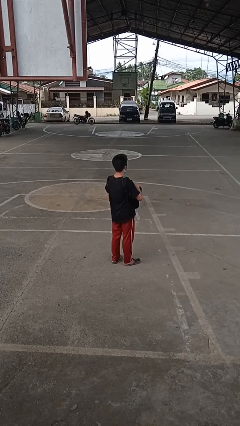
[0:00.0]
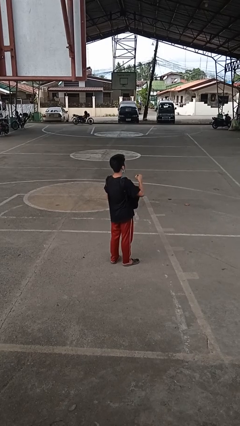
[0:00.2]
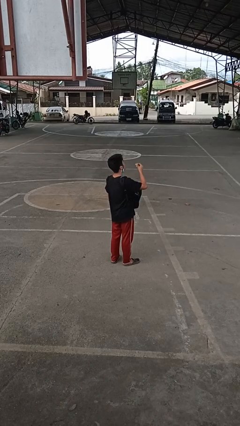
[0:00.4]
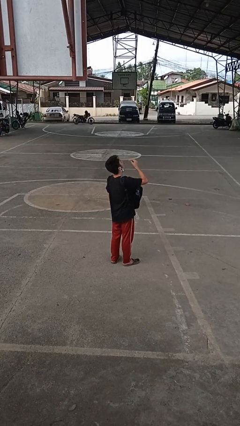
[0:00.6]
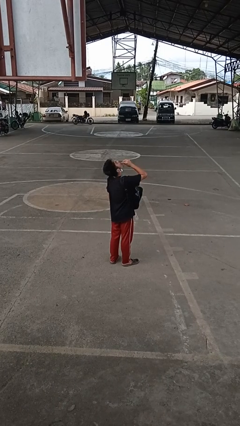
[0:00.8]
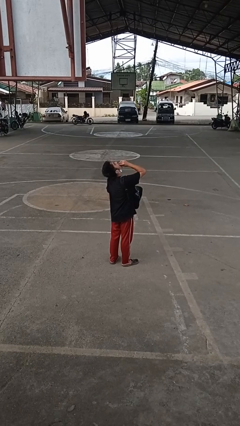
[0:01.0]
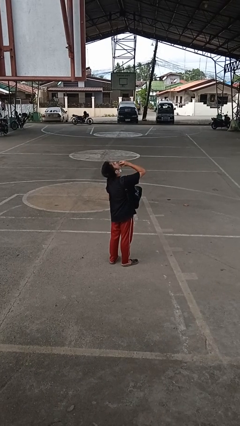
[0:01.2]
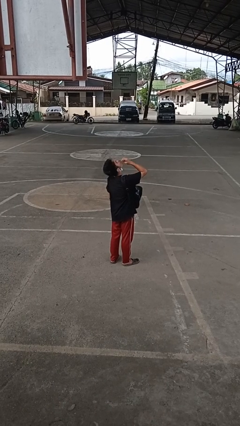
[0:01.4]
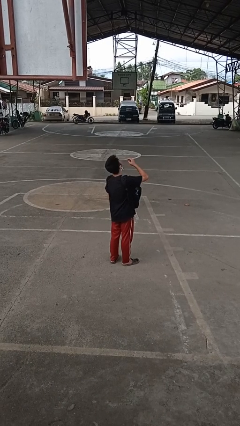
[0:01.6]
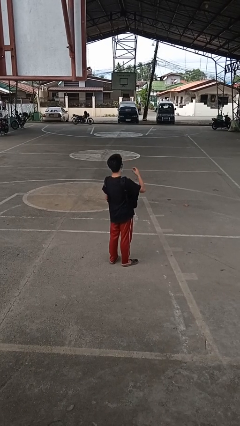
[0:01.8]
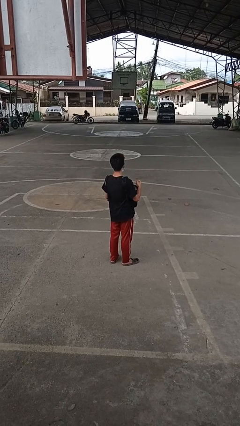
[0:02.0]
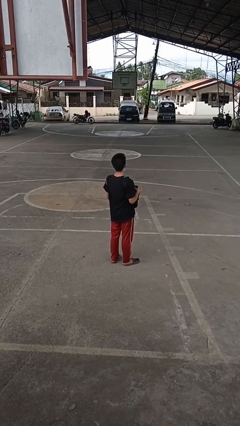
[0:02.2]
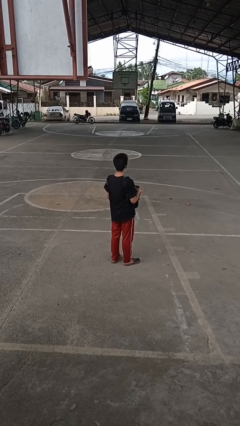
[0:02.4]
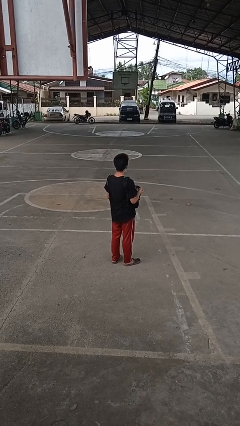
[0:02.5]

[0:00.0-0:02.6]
person eats snack from bag

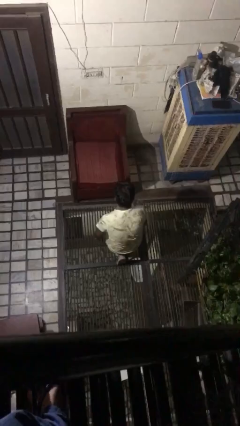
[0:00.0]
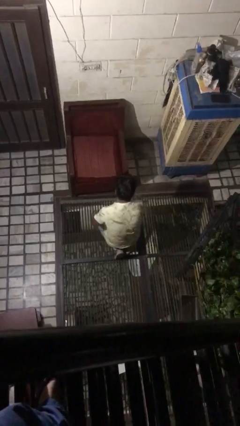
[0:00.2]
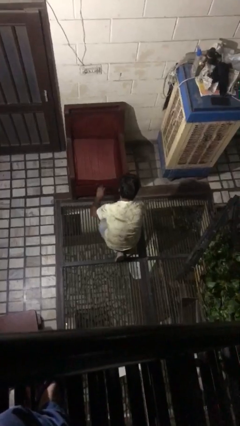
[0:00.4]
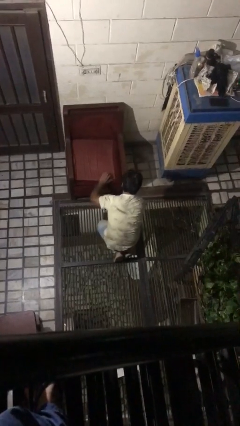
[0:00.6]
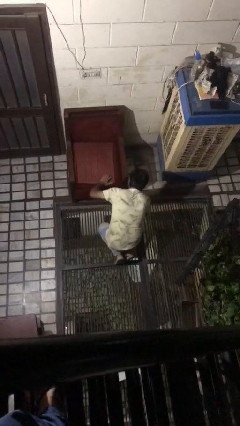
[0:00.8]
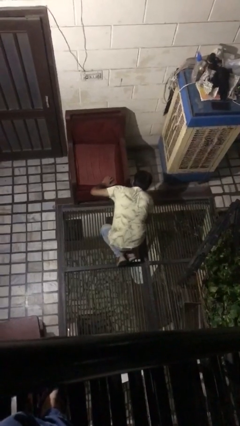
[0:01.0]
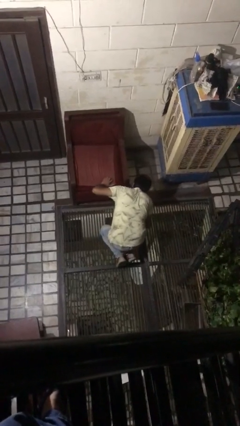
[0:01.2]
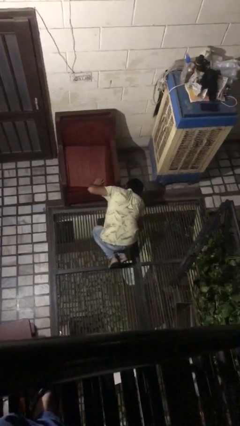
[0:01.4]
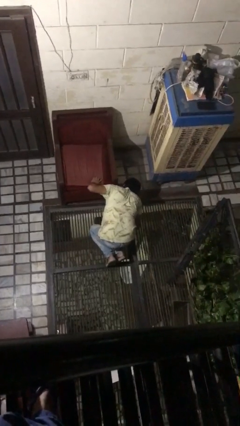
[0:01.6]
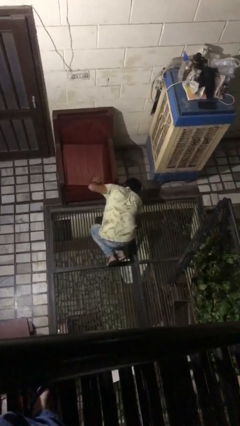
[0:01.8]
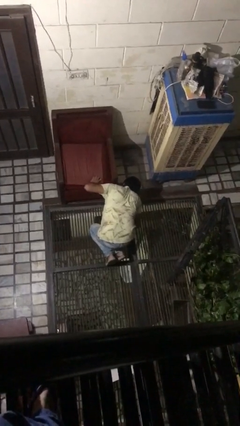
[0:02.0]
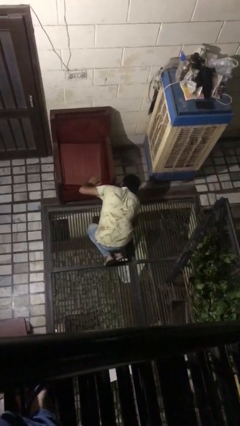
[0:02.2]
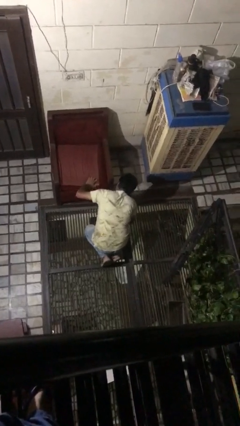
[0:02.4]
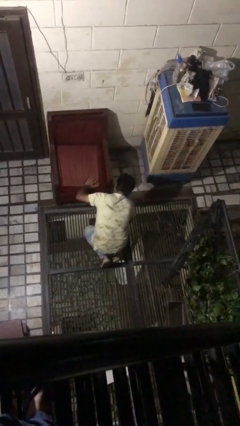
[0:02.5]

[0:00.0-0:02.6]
person searches under couch

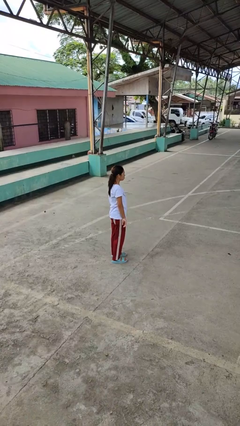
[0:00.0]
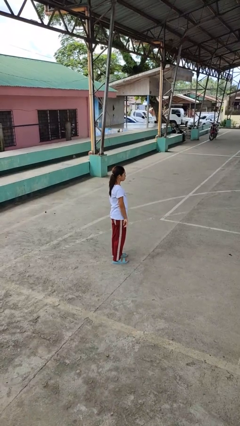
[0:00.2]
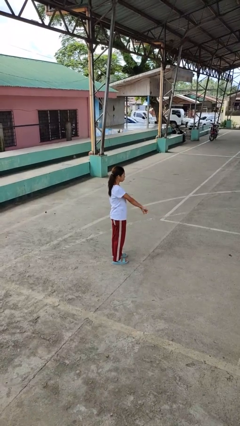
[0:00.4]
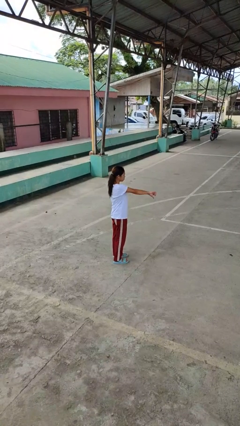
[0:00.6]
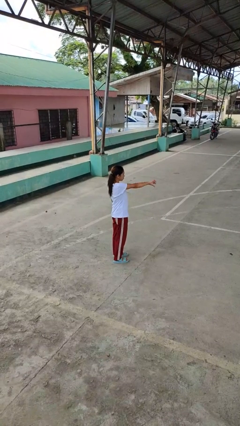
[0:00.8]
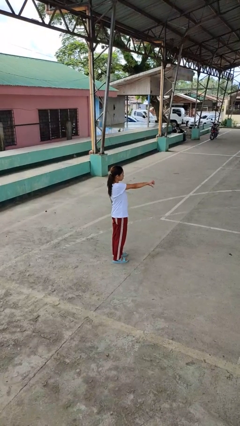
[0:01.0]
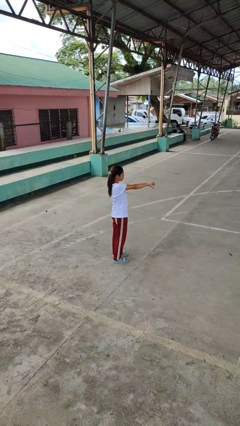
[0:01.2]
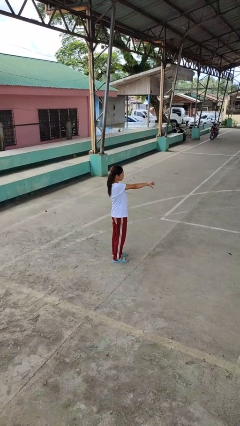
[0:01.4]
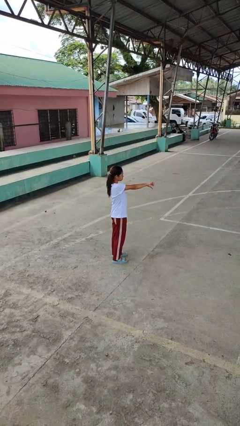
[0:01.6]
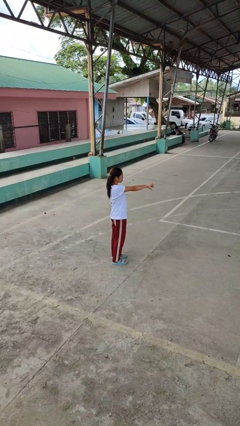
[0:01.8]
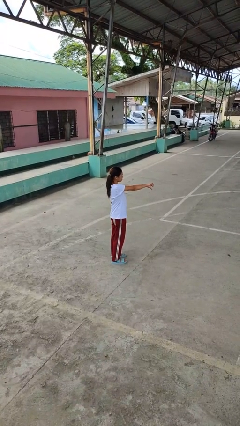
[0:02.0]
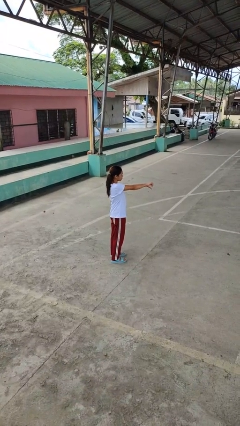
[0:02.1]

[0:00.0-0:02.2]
person gestures thumbs down

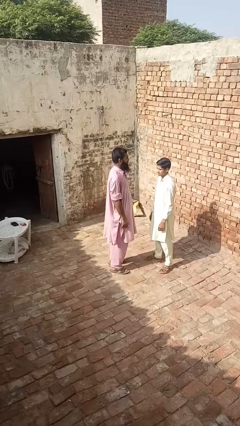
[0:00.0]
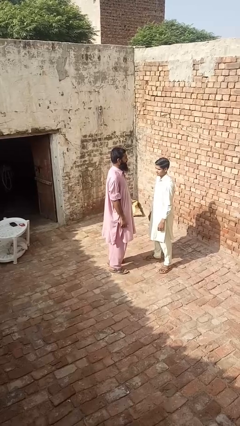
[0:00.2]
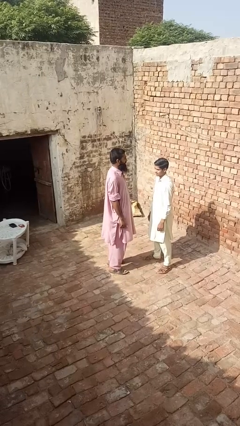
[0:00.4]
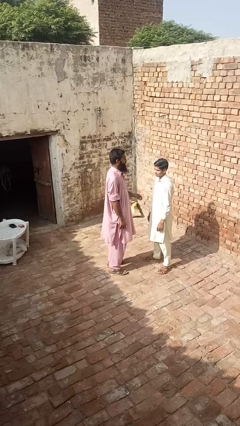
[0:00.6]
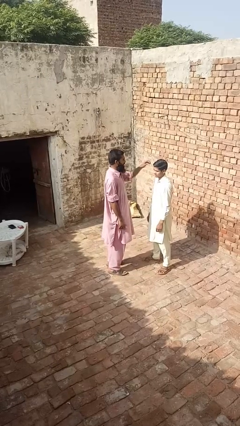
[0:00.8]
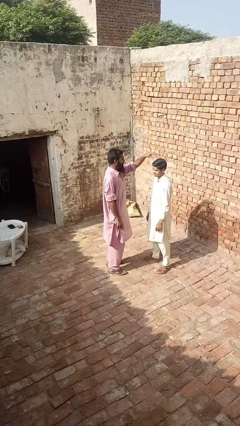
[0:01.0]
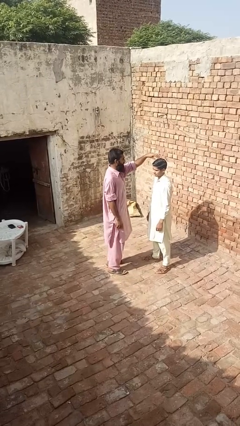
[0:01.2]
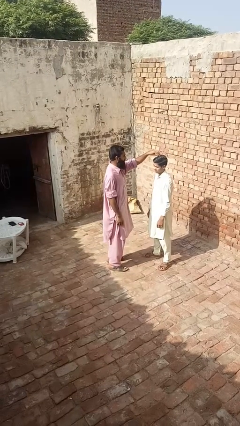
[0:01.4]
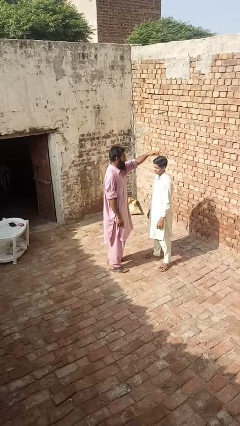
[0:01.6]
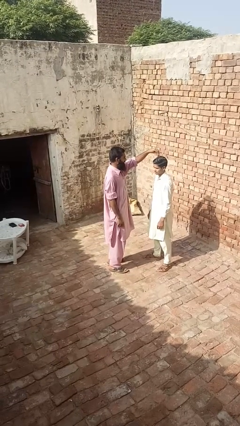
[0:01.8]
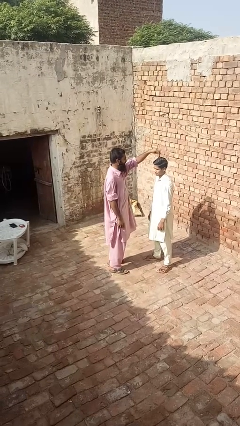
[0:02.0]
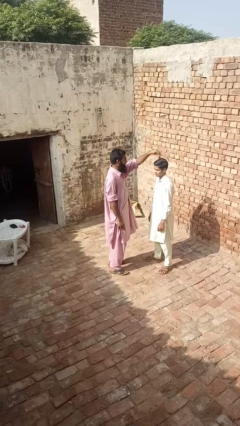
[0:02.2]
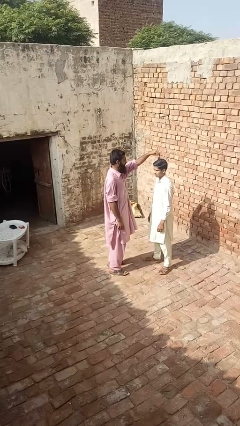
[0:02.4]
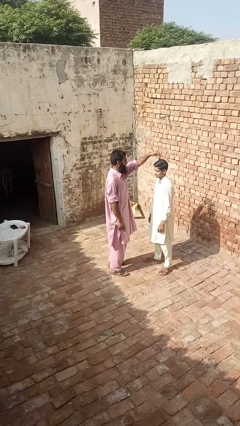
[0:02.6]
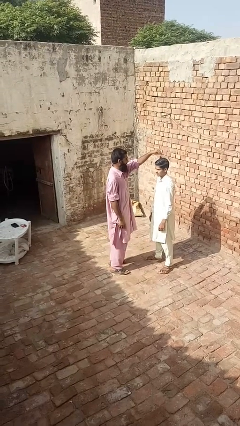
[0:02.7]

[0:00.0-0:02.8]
person grabs person by hair

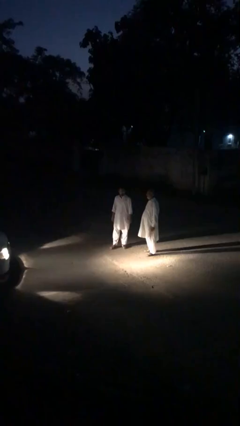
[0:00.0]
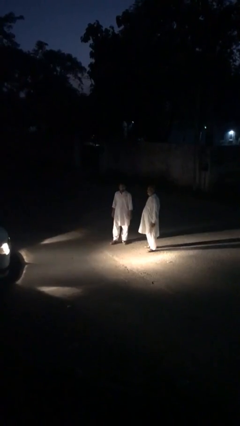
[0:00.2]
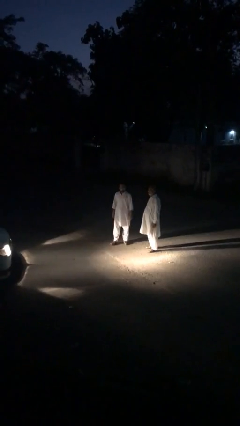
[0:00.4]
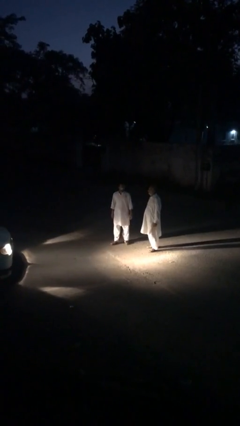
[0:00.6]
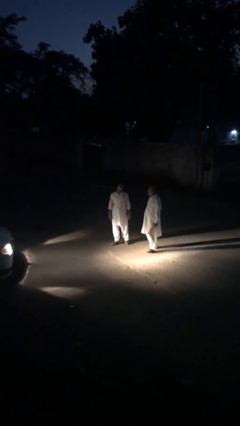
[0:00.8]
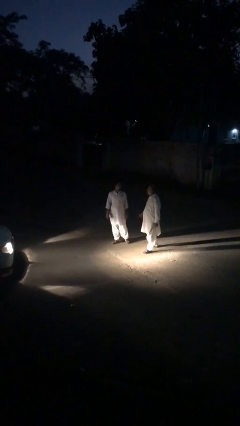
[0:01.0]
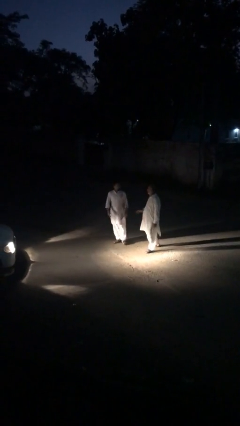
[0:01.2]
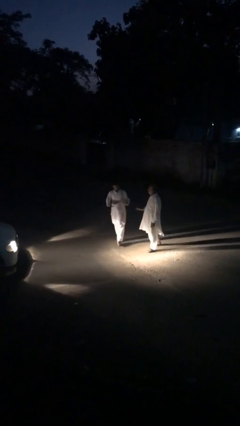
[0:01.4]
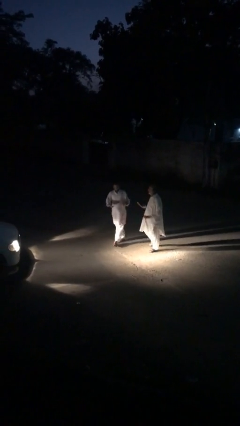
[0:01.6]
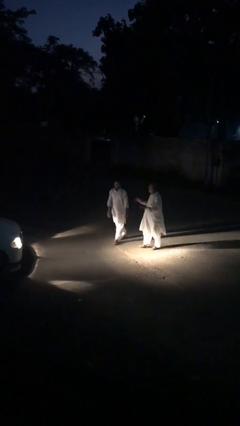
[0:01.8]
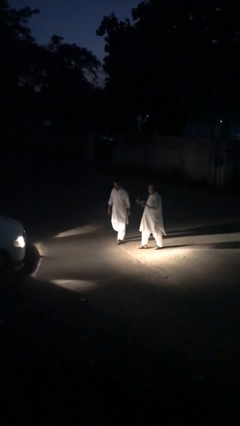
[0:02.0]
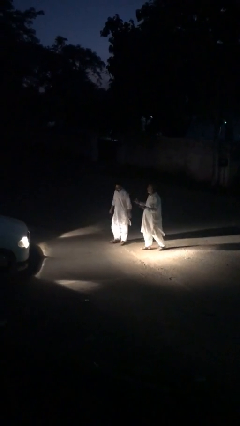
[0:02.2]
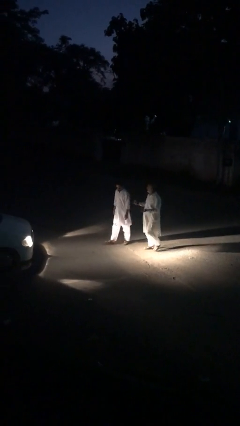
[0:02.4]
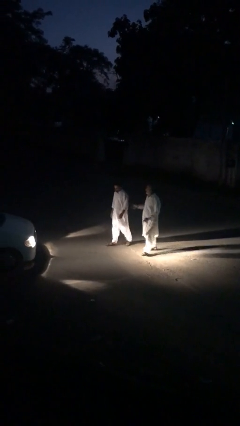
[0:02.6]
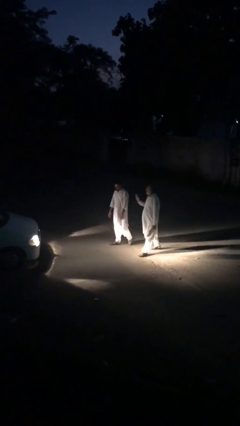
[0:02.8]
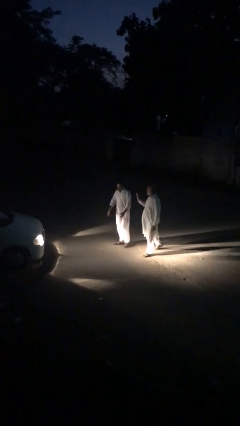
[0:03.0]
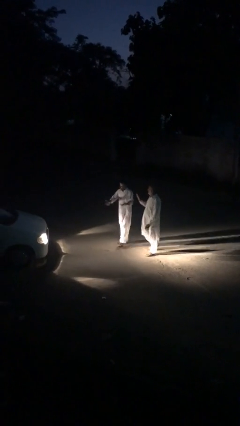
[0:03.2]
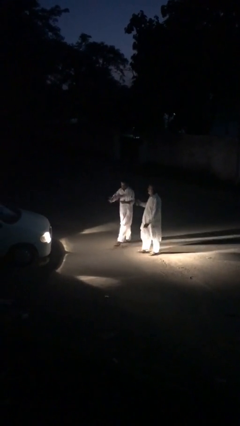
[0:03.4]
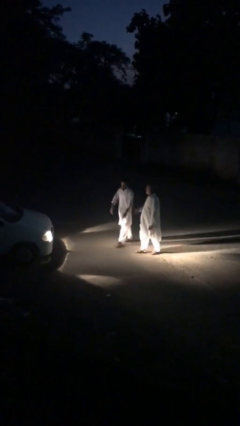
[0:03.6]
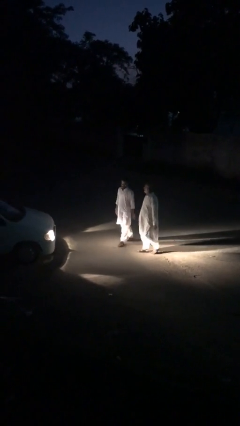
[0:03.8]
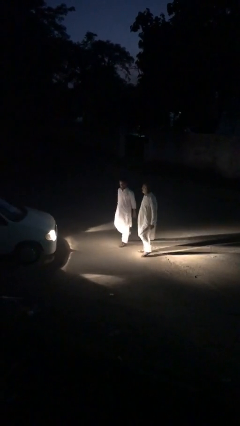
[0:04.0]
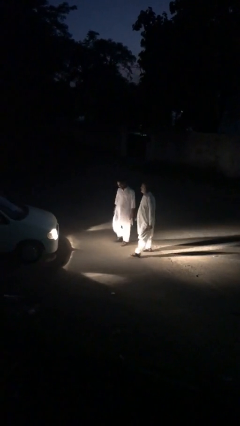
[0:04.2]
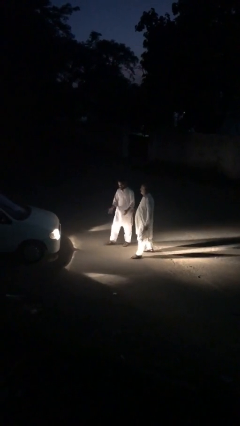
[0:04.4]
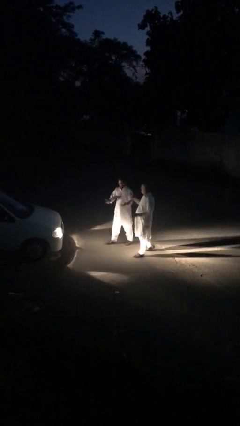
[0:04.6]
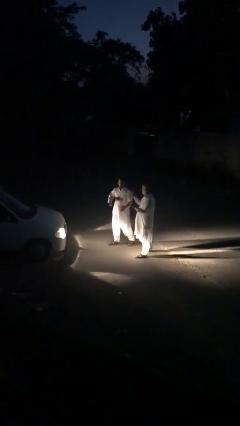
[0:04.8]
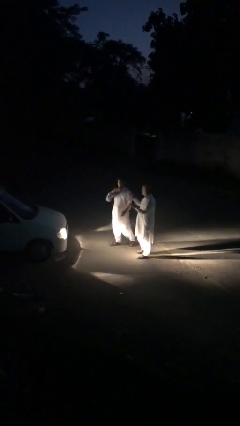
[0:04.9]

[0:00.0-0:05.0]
person talks to person

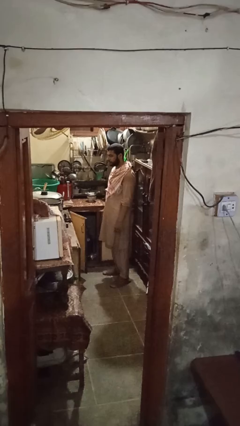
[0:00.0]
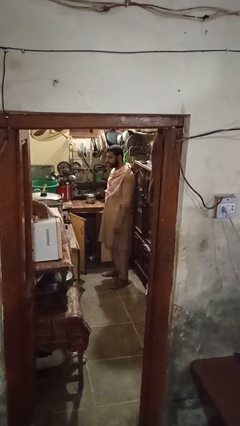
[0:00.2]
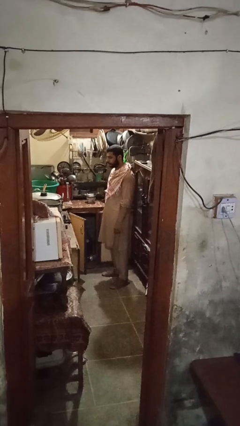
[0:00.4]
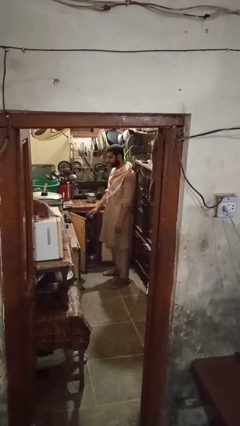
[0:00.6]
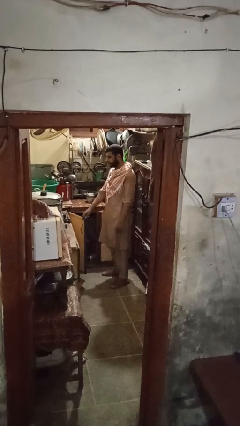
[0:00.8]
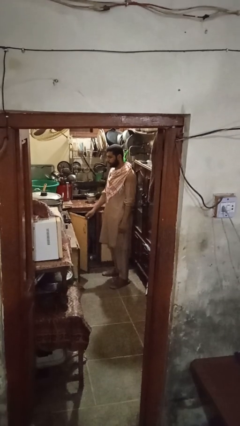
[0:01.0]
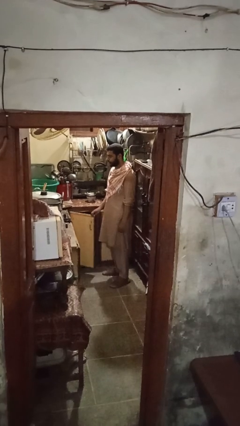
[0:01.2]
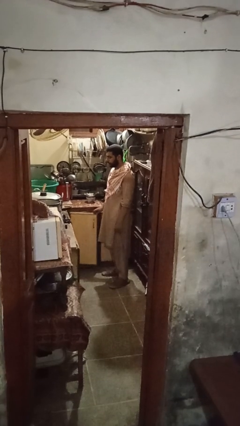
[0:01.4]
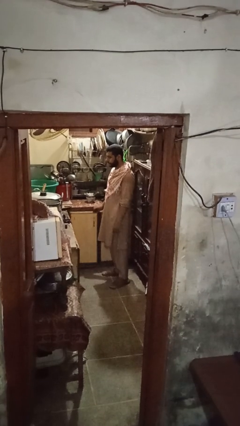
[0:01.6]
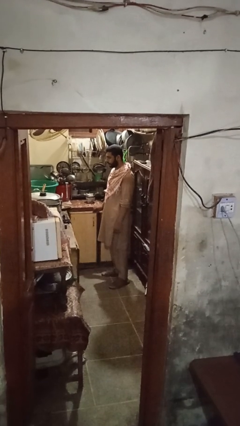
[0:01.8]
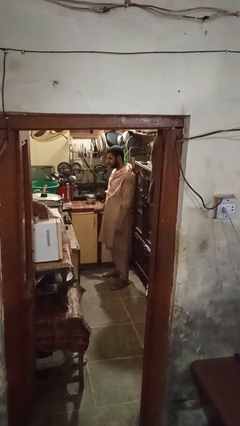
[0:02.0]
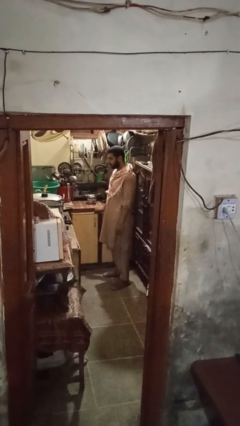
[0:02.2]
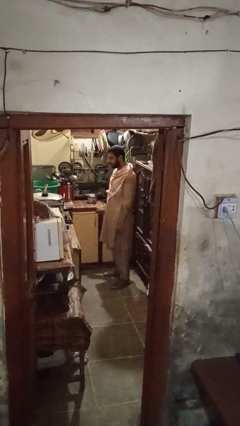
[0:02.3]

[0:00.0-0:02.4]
person closes cabinet
